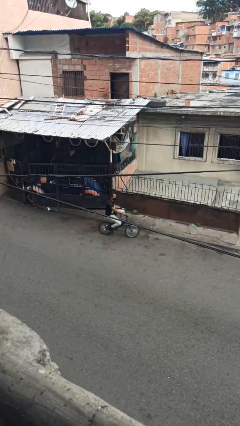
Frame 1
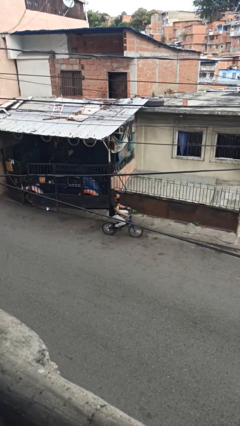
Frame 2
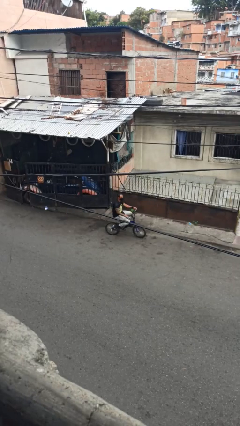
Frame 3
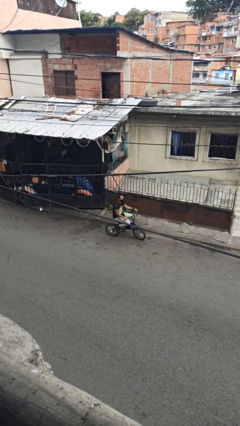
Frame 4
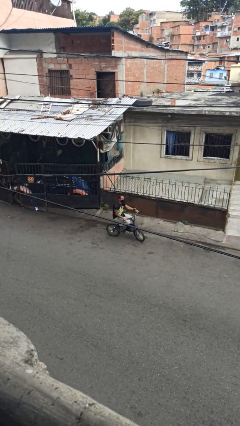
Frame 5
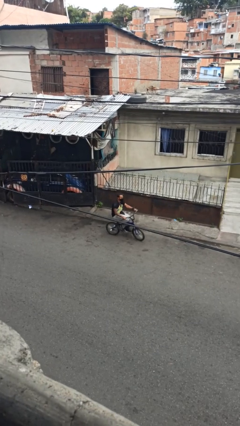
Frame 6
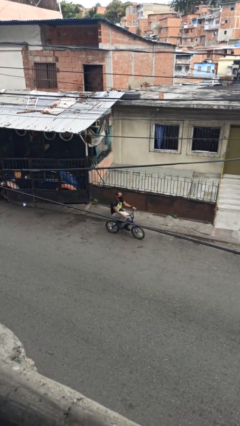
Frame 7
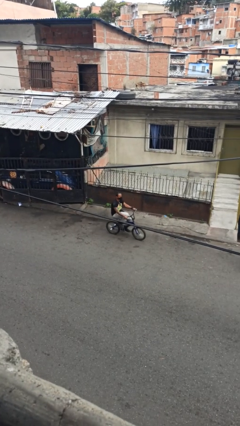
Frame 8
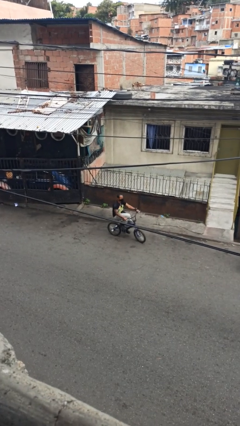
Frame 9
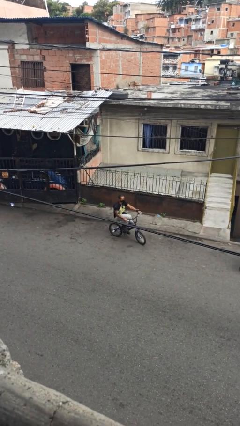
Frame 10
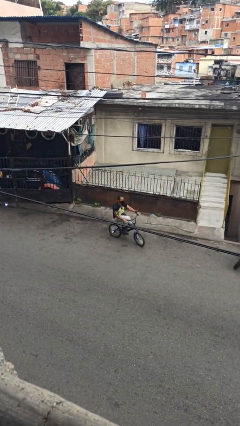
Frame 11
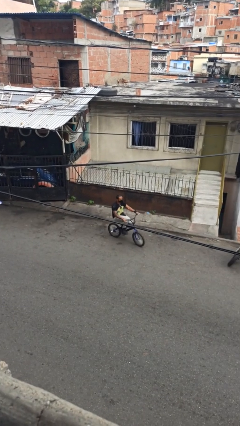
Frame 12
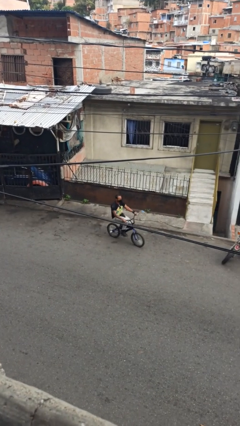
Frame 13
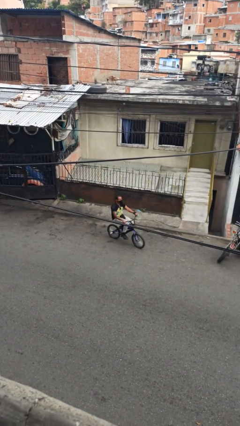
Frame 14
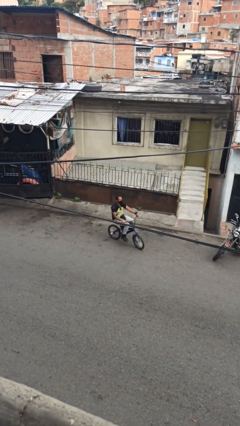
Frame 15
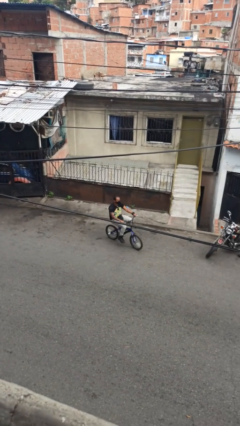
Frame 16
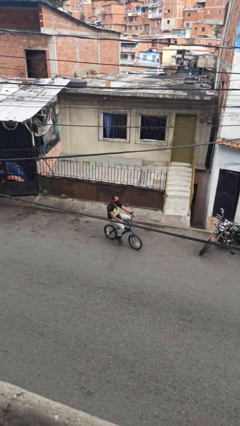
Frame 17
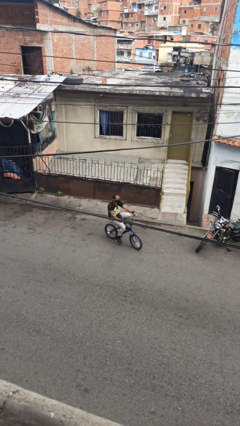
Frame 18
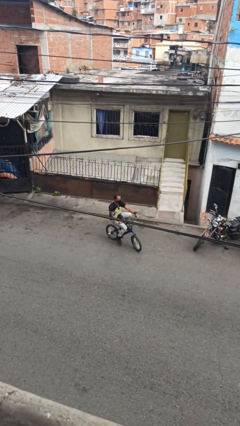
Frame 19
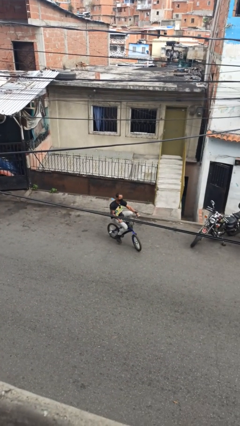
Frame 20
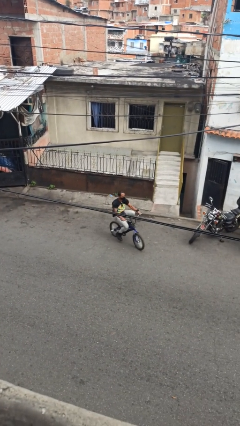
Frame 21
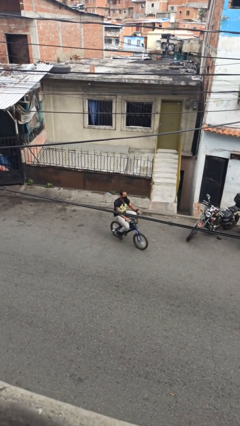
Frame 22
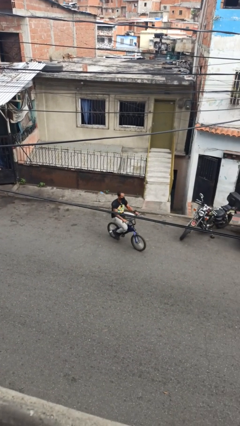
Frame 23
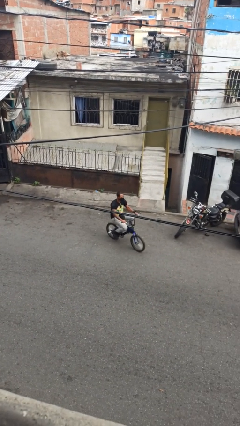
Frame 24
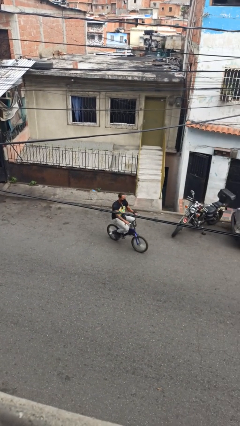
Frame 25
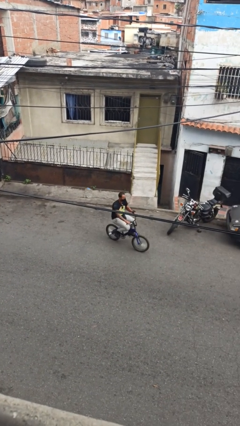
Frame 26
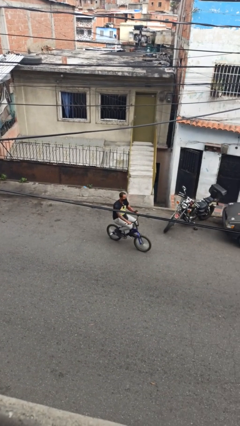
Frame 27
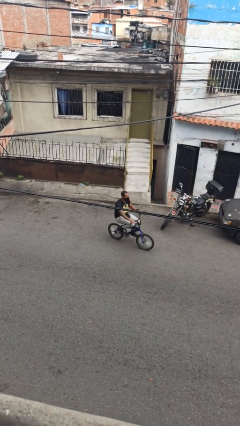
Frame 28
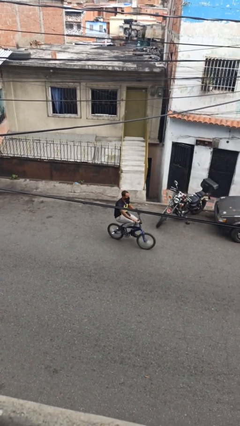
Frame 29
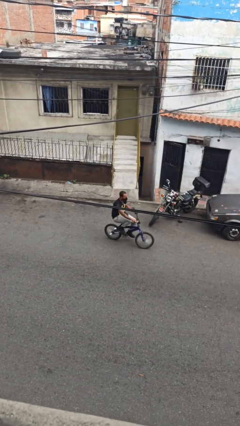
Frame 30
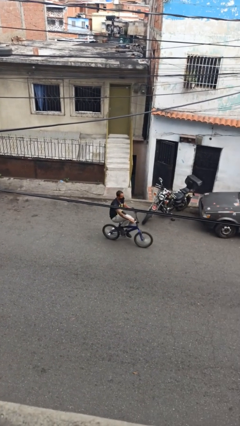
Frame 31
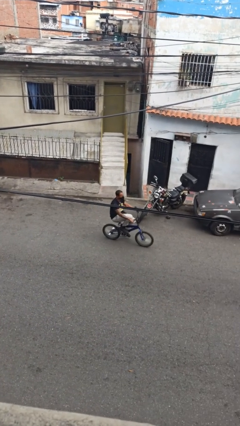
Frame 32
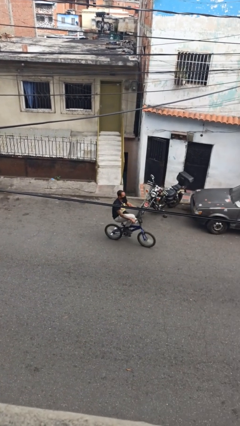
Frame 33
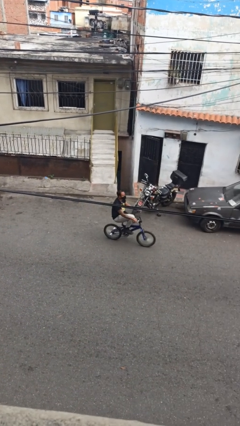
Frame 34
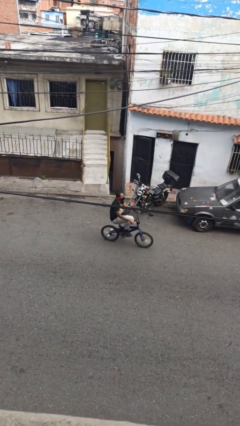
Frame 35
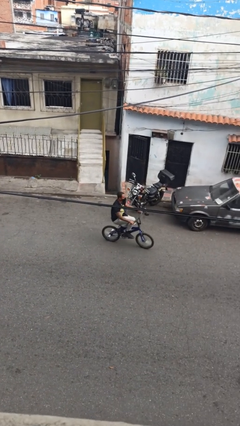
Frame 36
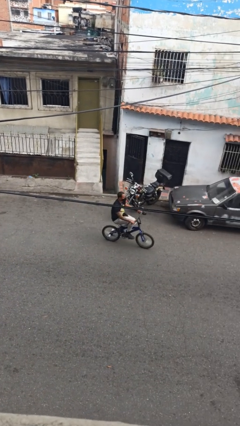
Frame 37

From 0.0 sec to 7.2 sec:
person rides bicycle

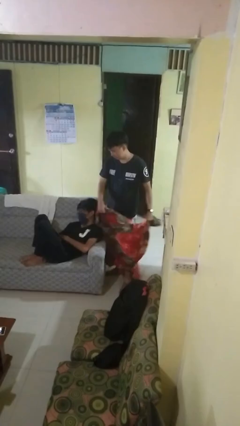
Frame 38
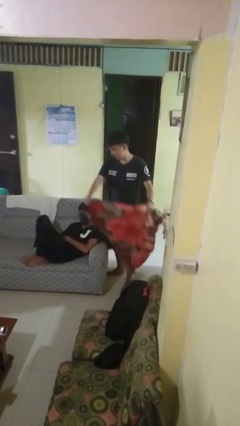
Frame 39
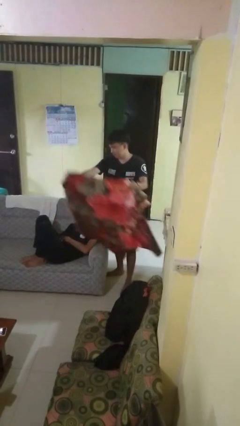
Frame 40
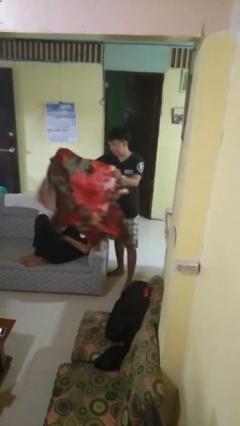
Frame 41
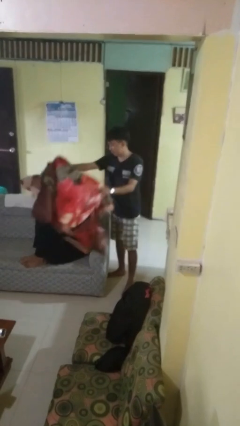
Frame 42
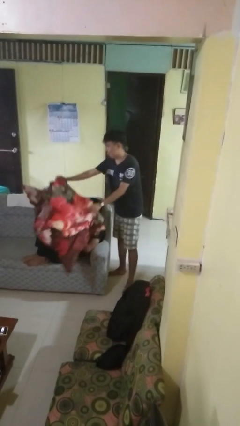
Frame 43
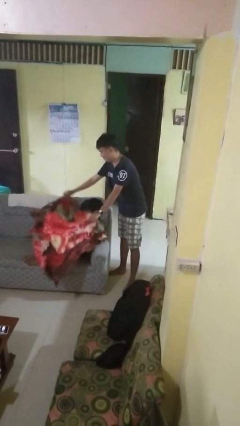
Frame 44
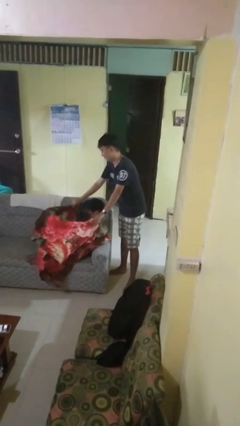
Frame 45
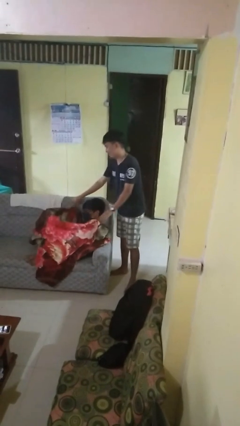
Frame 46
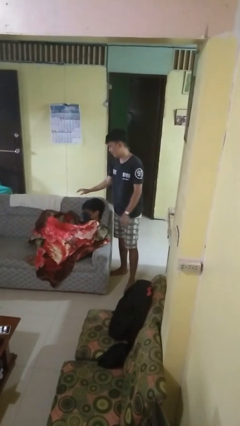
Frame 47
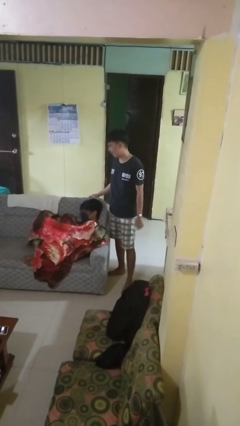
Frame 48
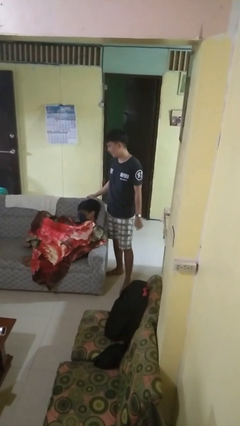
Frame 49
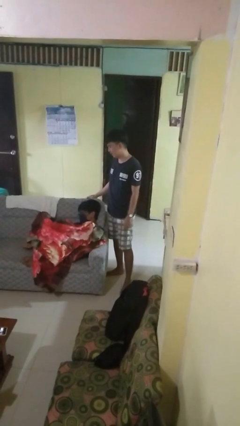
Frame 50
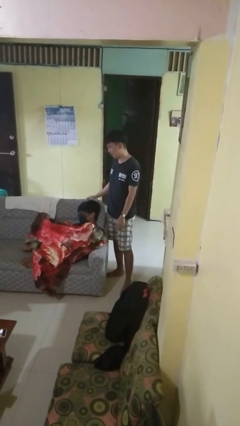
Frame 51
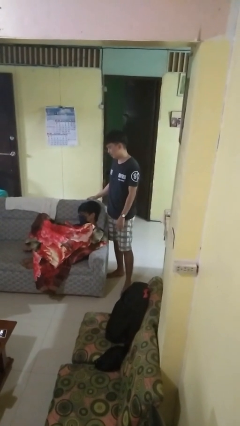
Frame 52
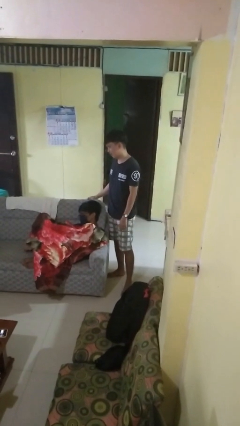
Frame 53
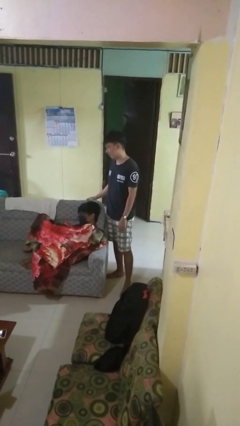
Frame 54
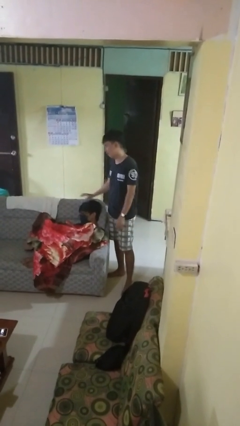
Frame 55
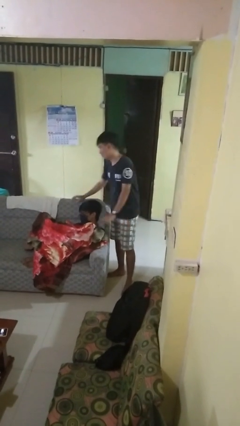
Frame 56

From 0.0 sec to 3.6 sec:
person covers friend with blanket

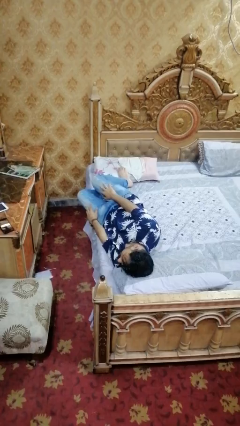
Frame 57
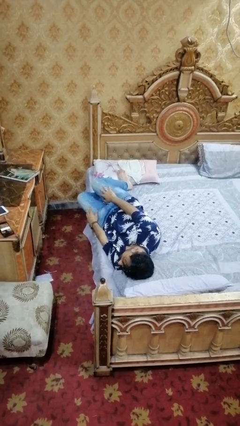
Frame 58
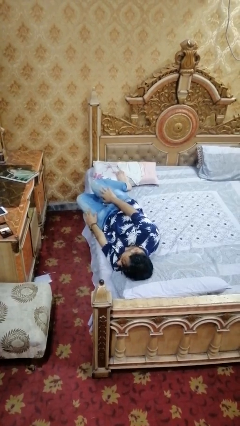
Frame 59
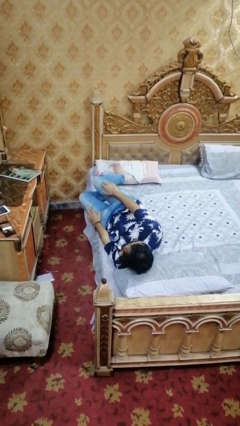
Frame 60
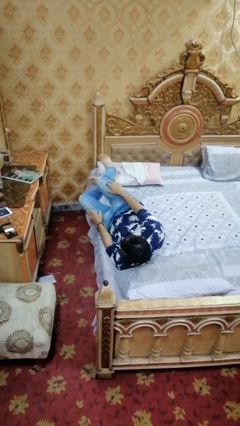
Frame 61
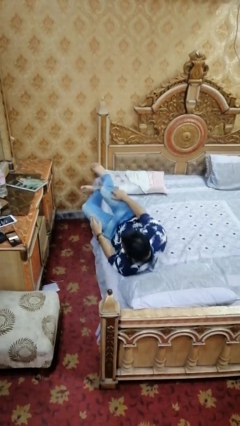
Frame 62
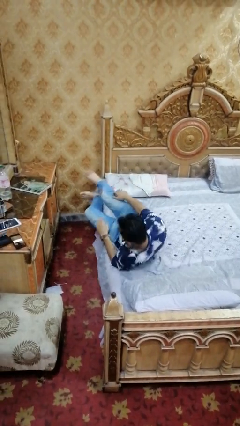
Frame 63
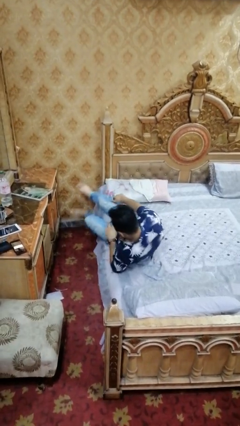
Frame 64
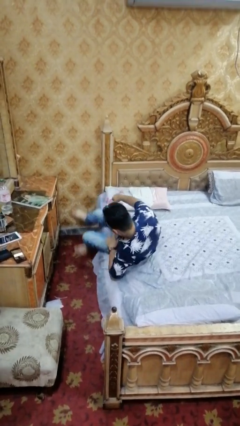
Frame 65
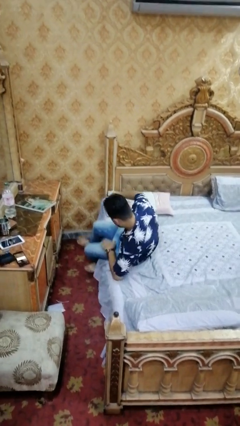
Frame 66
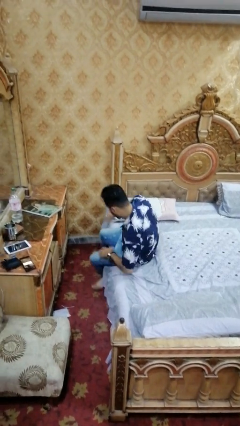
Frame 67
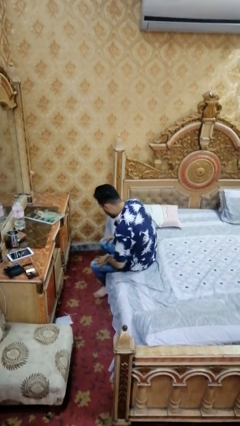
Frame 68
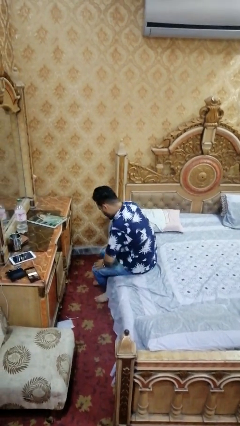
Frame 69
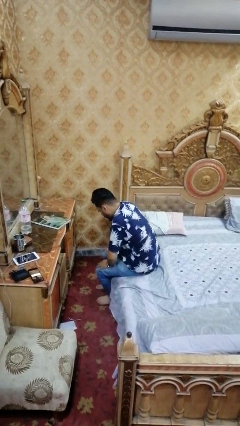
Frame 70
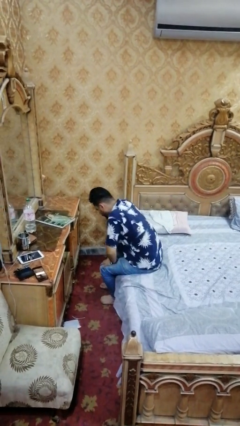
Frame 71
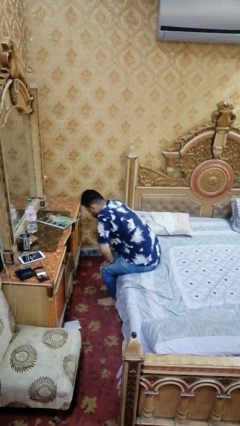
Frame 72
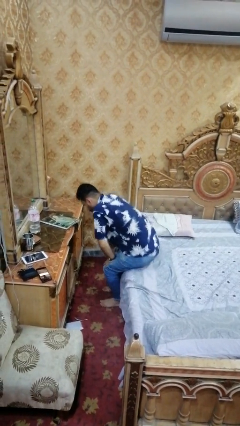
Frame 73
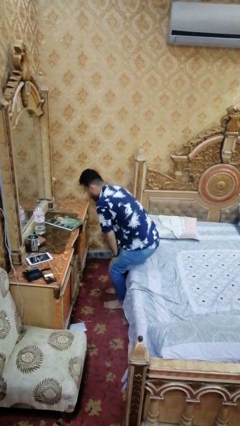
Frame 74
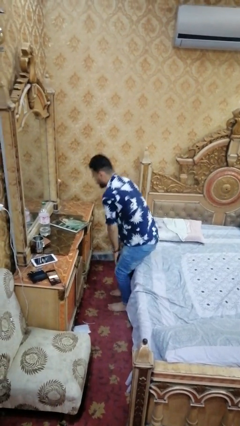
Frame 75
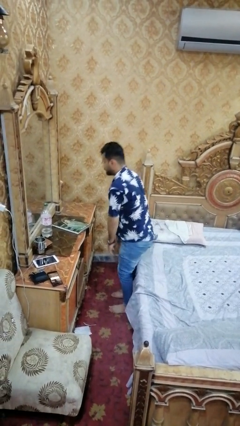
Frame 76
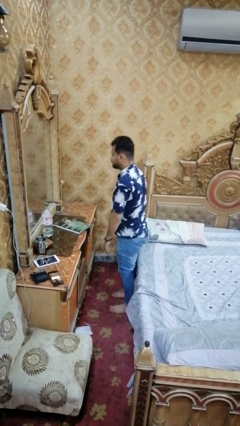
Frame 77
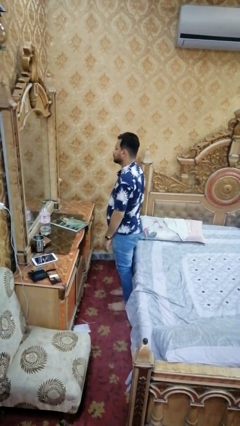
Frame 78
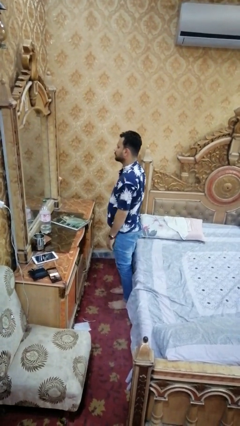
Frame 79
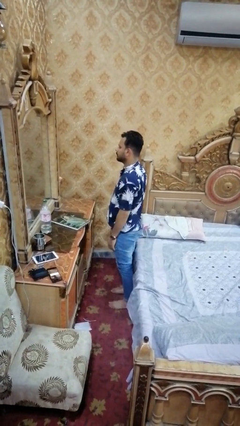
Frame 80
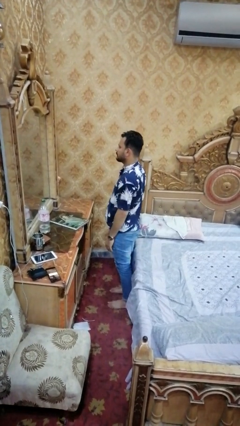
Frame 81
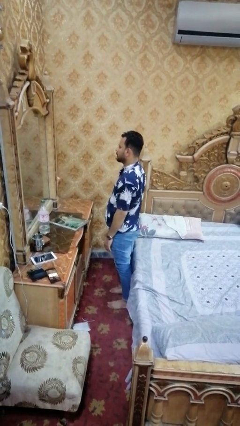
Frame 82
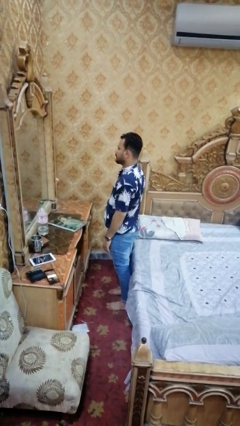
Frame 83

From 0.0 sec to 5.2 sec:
person stands up

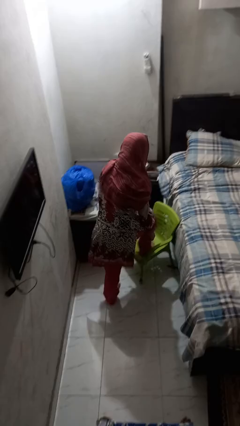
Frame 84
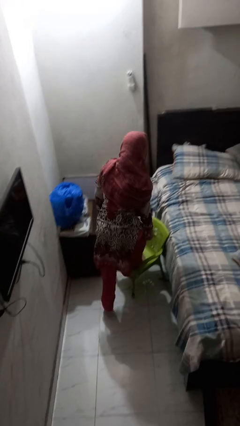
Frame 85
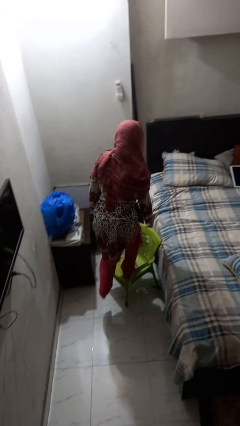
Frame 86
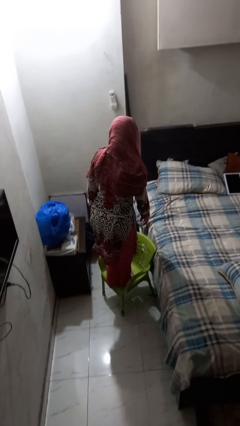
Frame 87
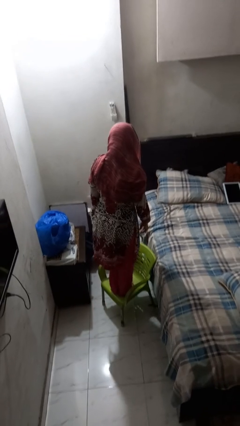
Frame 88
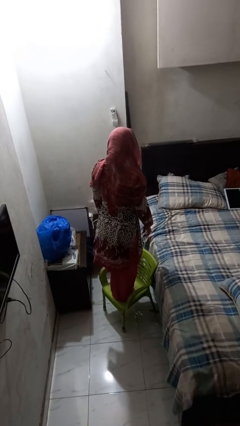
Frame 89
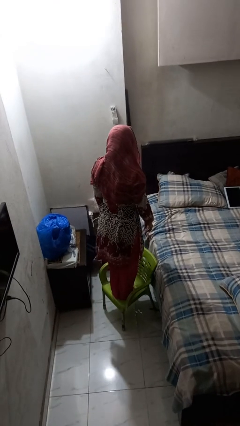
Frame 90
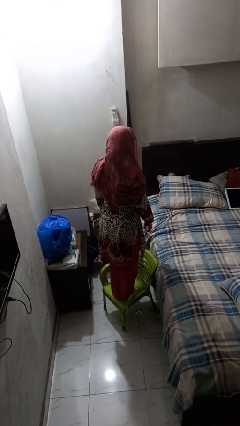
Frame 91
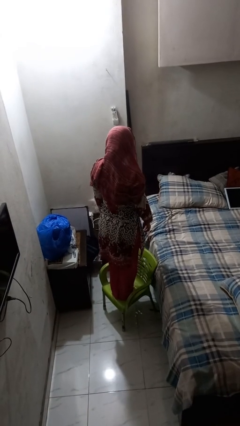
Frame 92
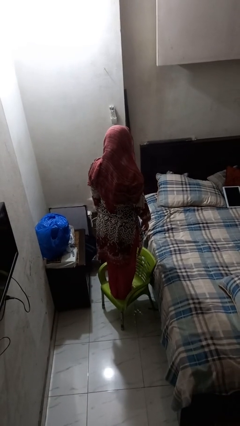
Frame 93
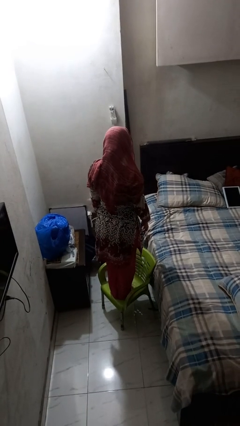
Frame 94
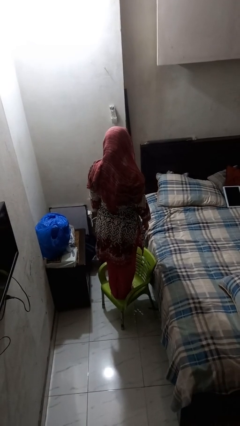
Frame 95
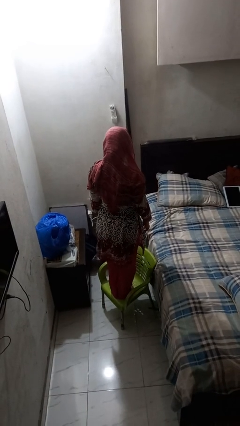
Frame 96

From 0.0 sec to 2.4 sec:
person climbs on chair
